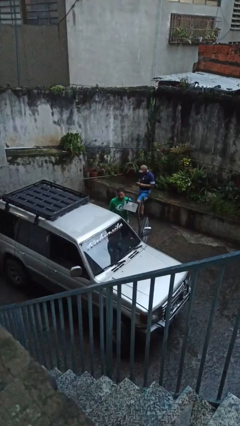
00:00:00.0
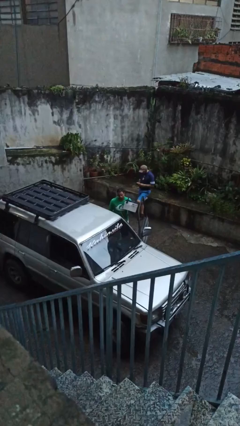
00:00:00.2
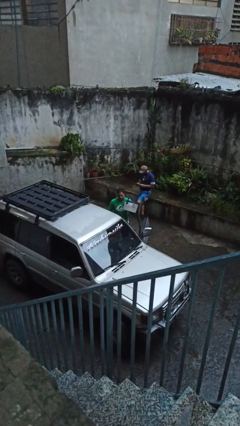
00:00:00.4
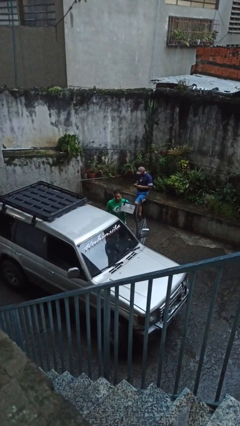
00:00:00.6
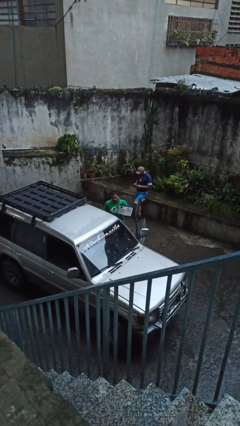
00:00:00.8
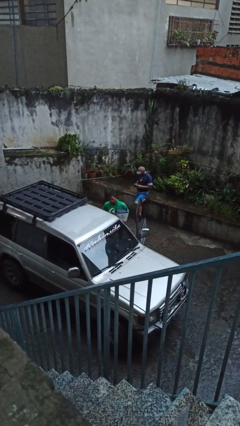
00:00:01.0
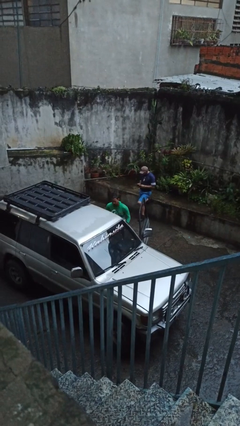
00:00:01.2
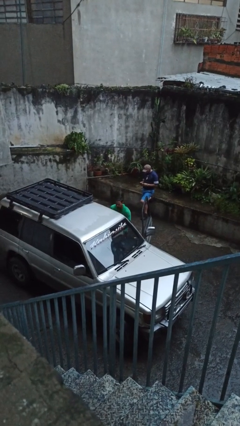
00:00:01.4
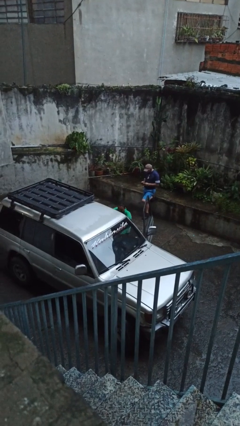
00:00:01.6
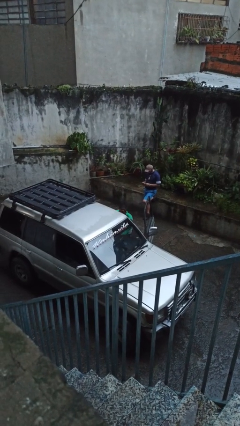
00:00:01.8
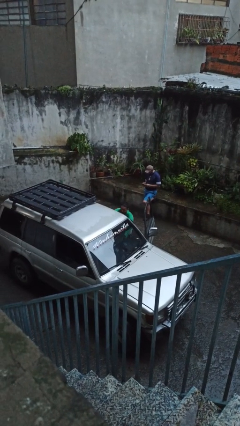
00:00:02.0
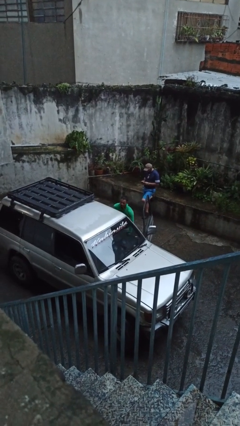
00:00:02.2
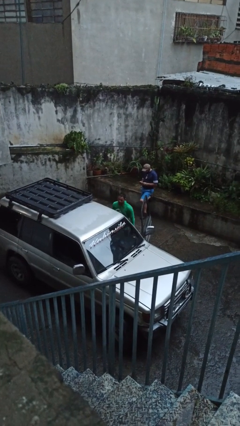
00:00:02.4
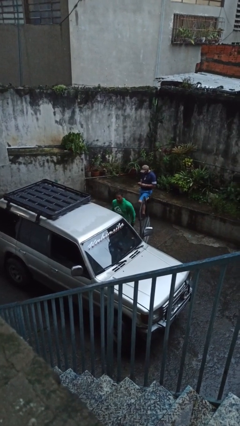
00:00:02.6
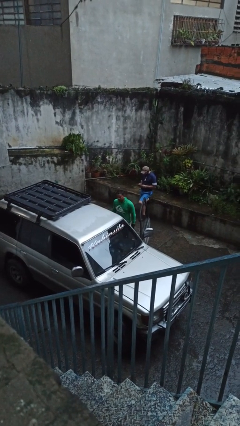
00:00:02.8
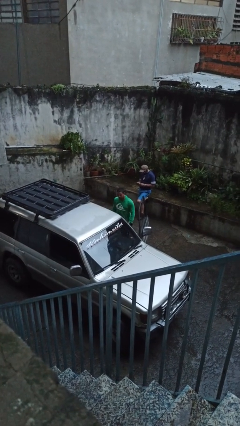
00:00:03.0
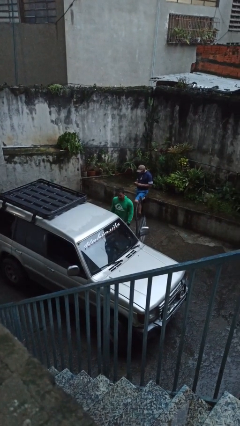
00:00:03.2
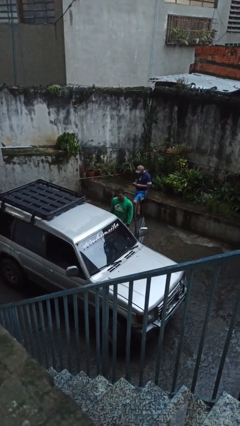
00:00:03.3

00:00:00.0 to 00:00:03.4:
person loads car

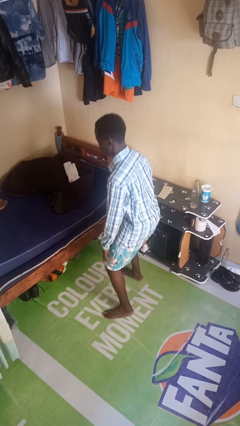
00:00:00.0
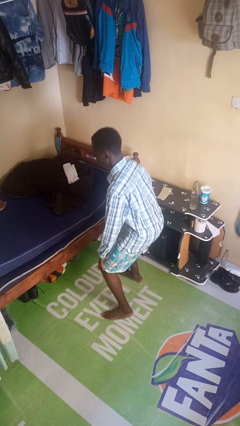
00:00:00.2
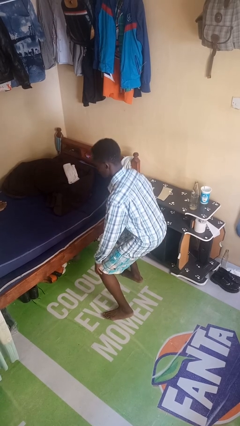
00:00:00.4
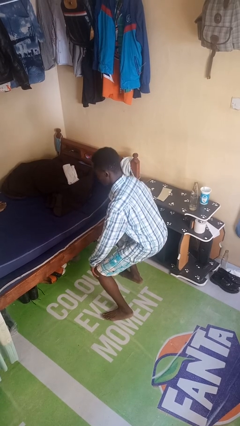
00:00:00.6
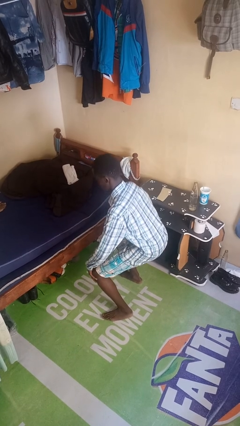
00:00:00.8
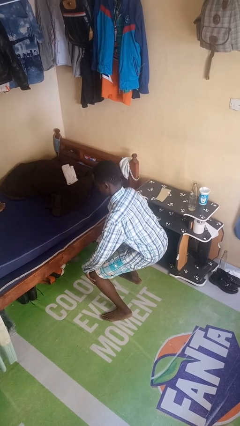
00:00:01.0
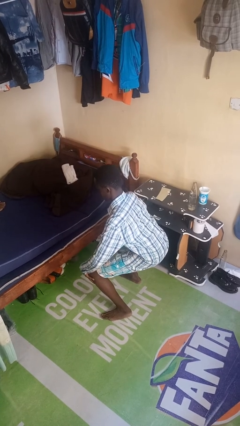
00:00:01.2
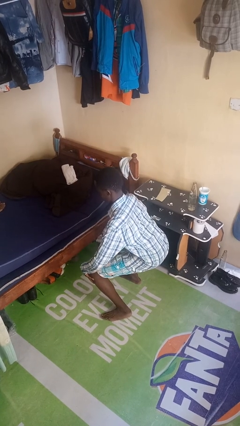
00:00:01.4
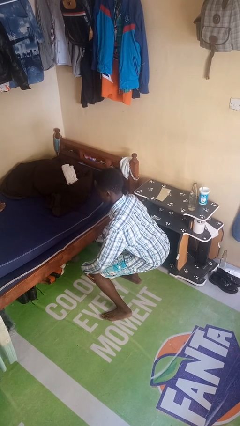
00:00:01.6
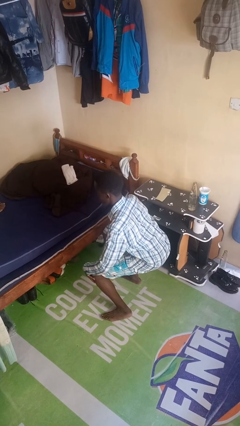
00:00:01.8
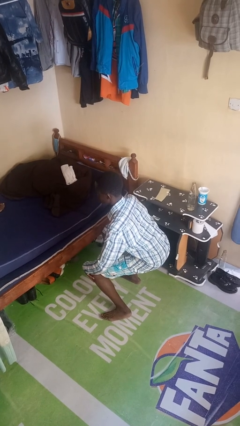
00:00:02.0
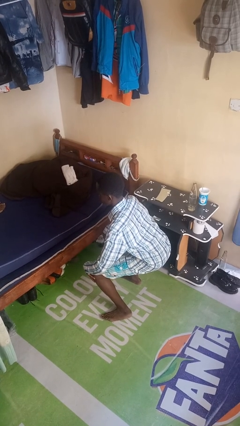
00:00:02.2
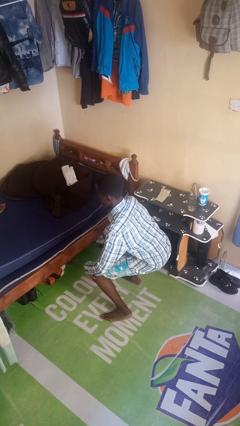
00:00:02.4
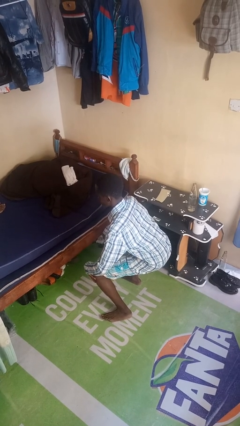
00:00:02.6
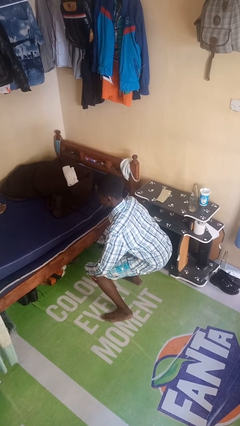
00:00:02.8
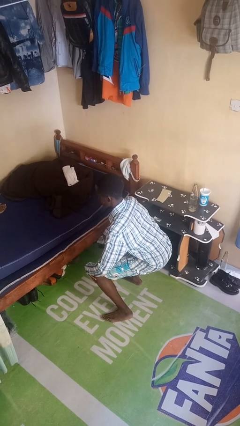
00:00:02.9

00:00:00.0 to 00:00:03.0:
person squats

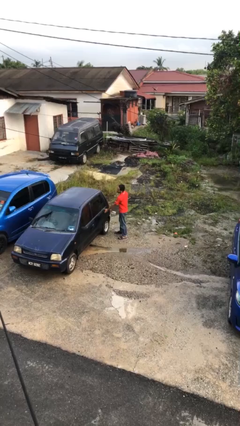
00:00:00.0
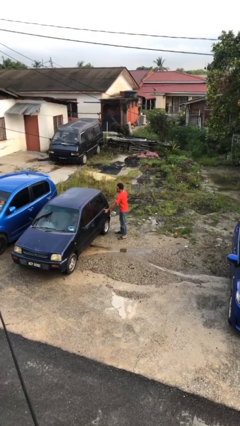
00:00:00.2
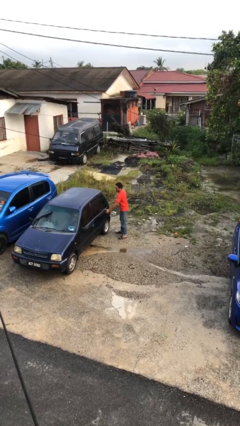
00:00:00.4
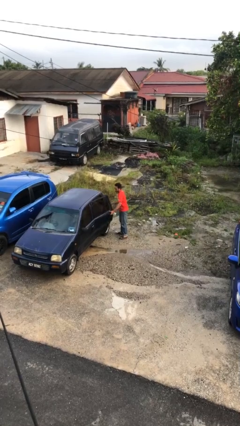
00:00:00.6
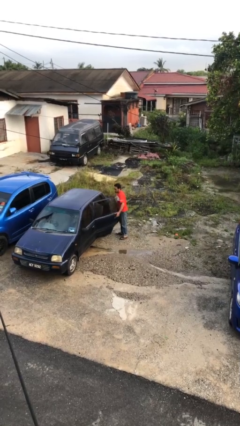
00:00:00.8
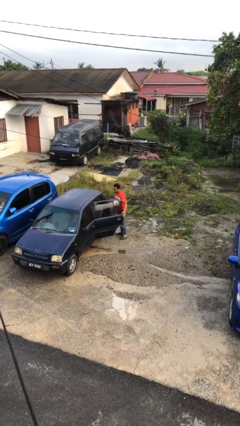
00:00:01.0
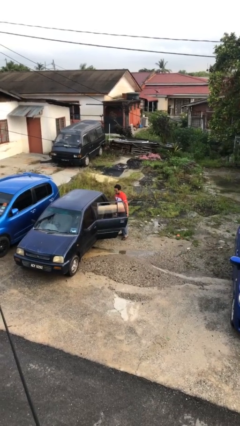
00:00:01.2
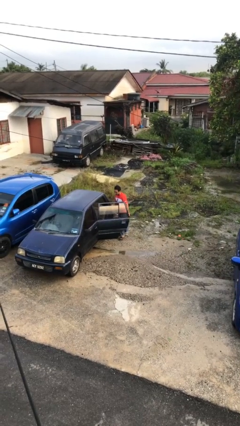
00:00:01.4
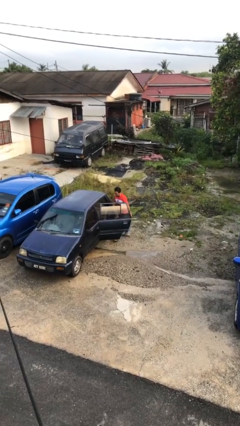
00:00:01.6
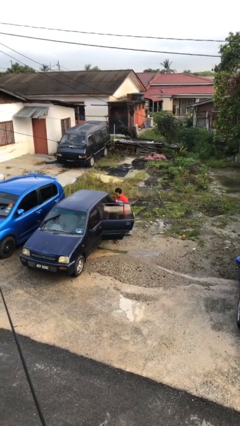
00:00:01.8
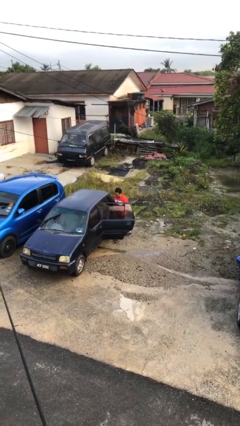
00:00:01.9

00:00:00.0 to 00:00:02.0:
person opens car door

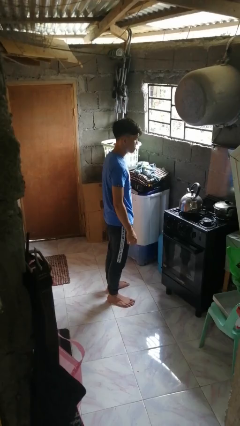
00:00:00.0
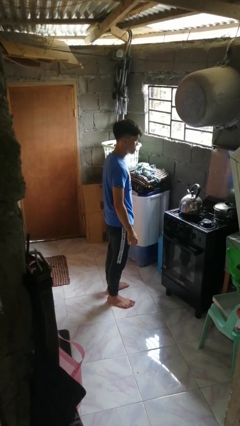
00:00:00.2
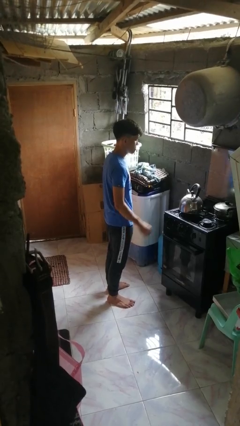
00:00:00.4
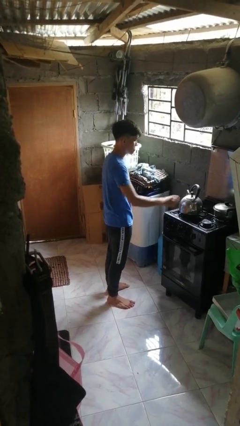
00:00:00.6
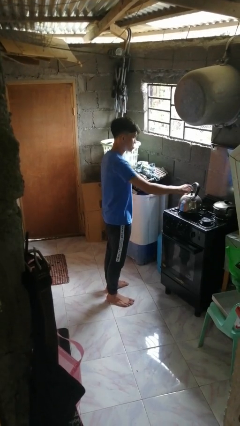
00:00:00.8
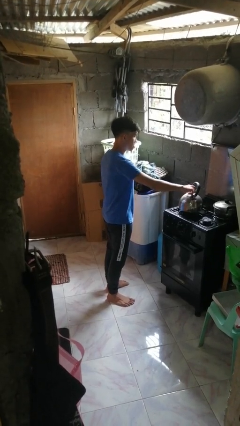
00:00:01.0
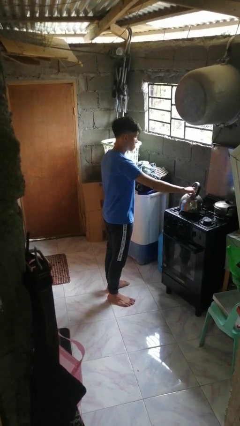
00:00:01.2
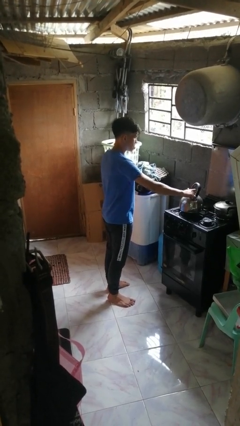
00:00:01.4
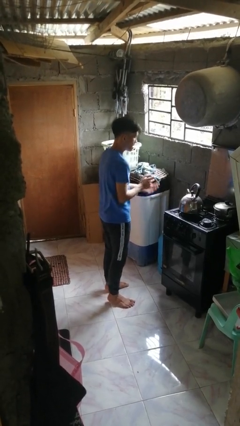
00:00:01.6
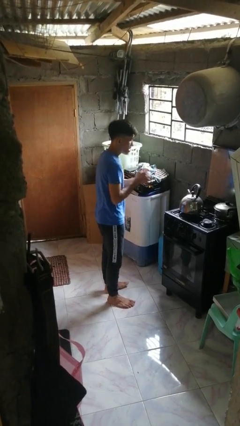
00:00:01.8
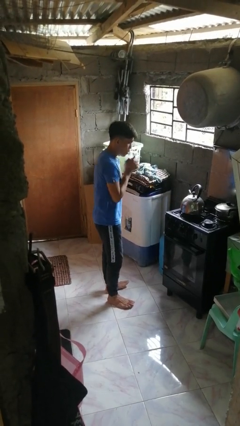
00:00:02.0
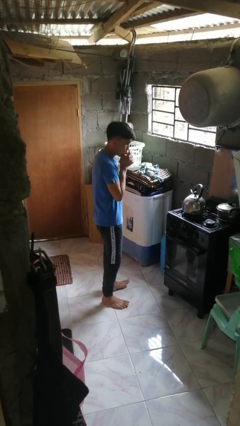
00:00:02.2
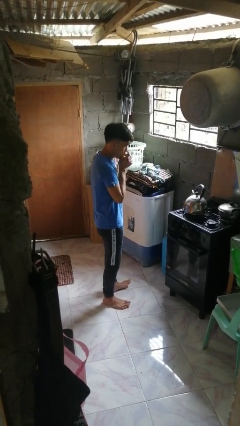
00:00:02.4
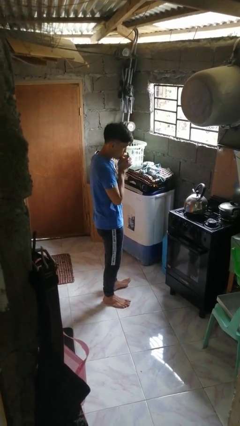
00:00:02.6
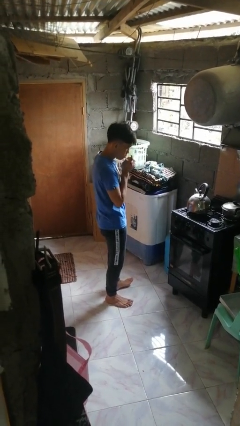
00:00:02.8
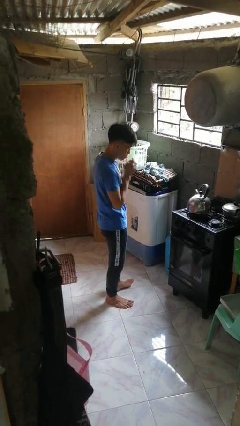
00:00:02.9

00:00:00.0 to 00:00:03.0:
person burns hand

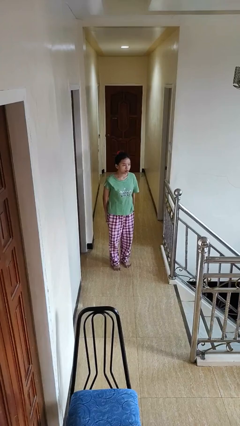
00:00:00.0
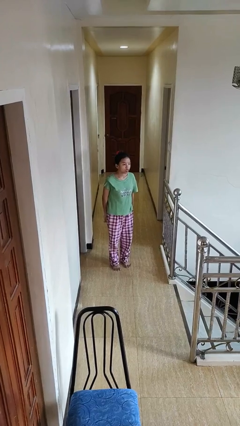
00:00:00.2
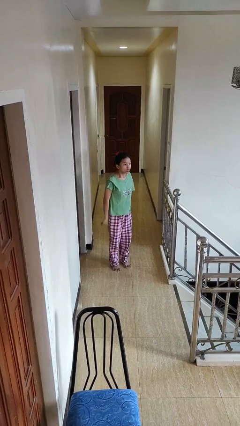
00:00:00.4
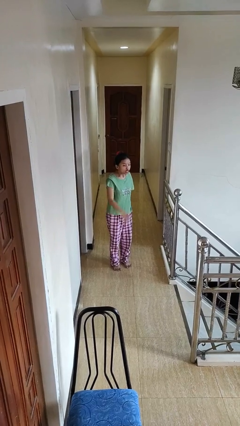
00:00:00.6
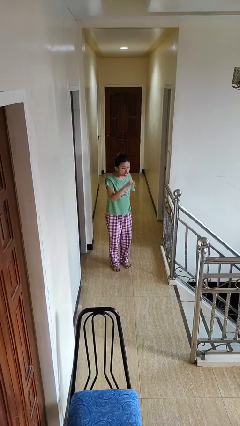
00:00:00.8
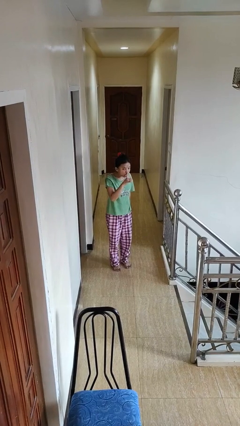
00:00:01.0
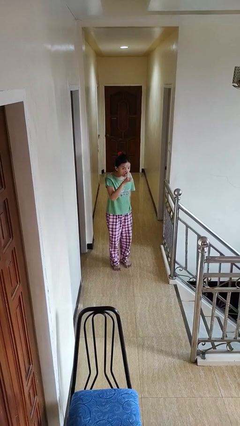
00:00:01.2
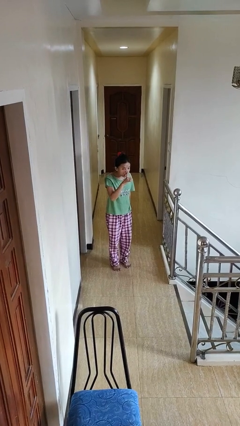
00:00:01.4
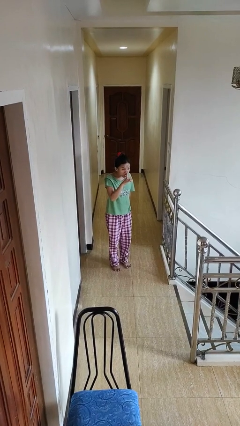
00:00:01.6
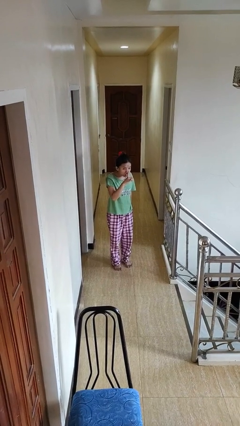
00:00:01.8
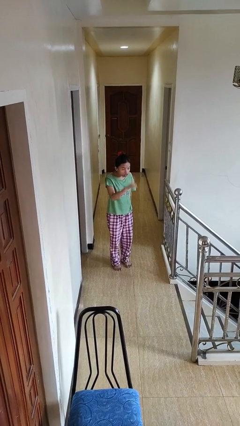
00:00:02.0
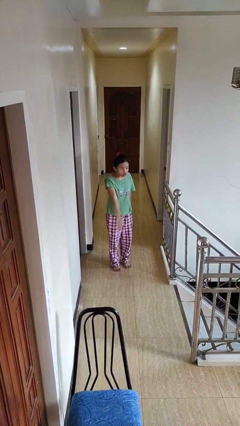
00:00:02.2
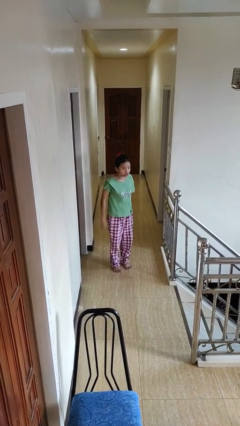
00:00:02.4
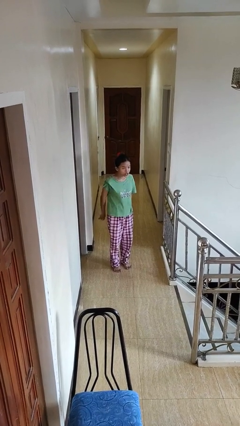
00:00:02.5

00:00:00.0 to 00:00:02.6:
person gestures be quiet

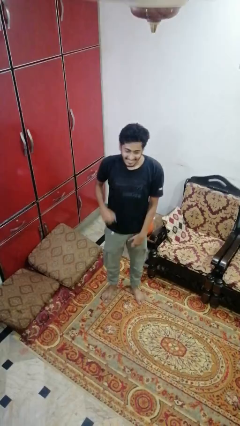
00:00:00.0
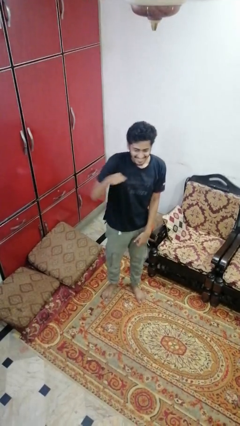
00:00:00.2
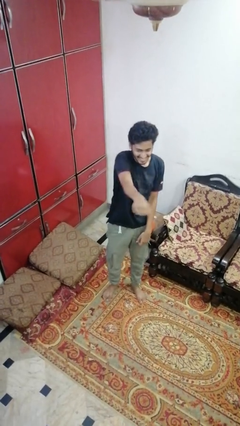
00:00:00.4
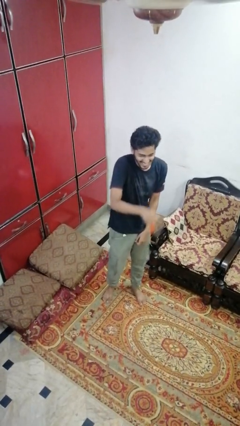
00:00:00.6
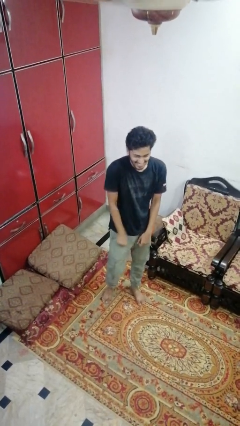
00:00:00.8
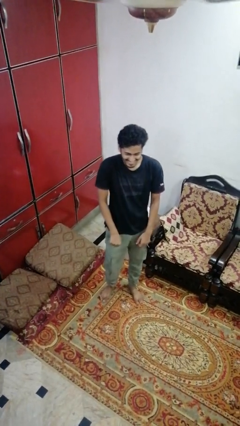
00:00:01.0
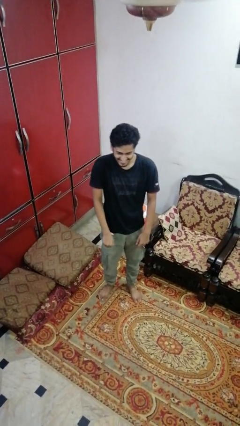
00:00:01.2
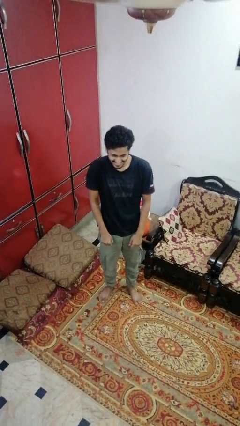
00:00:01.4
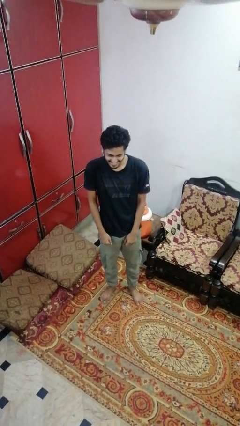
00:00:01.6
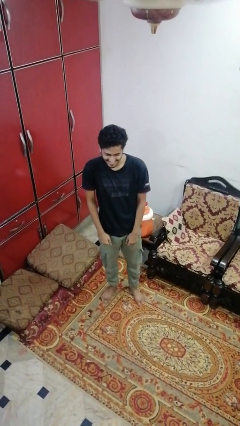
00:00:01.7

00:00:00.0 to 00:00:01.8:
person punches

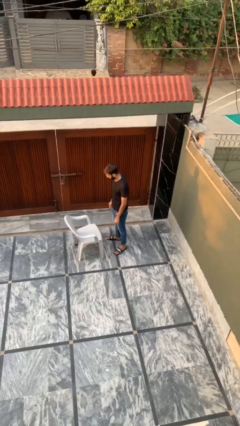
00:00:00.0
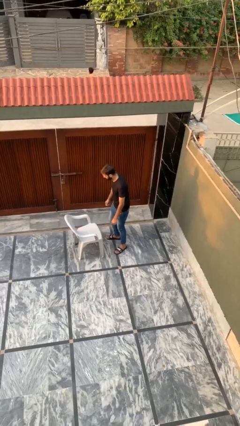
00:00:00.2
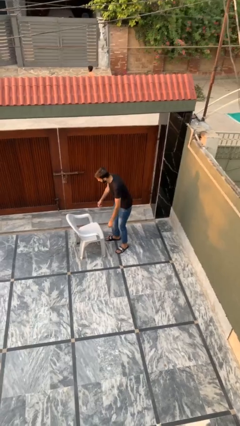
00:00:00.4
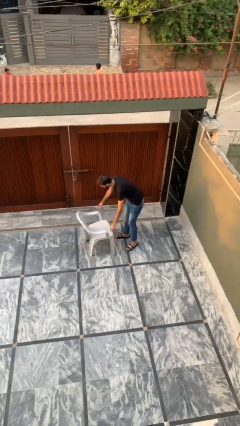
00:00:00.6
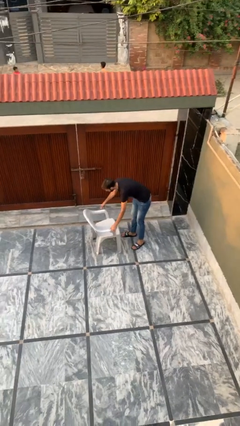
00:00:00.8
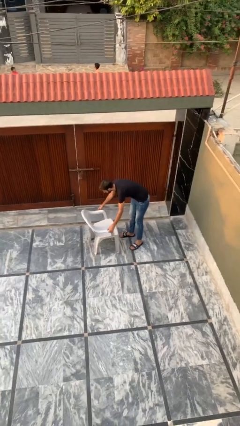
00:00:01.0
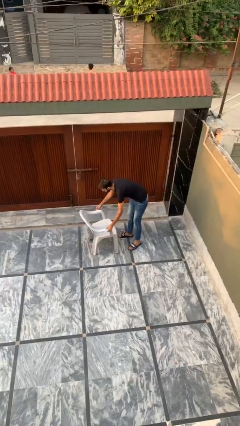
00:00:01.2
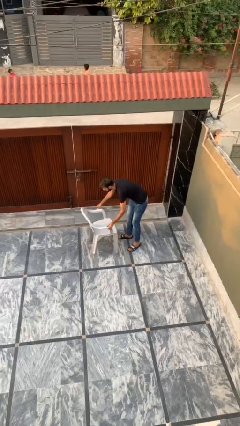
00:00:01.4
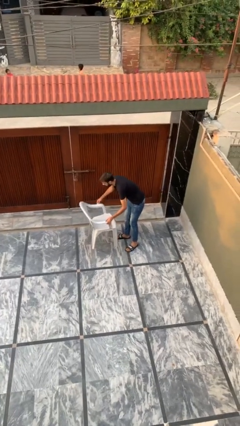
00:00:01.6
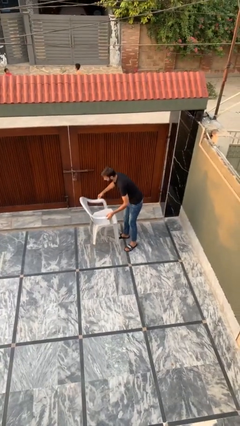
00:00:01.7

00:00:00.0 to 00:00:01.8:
person picks up object from floor
